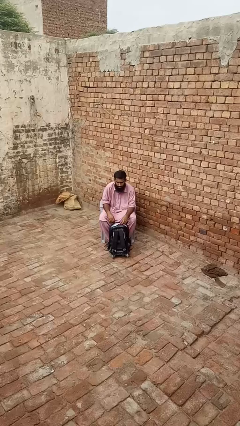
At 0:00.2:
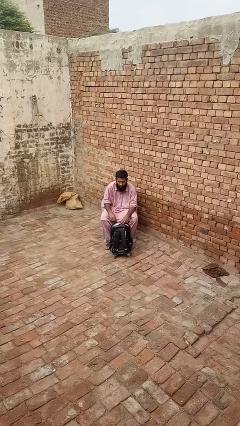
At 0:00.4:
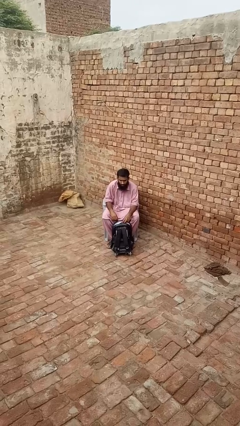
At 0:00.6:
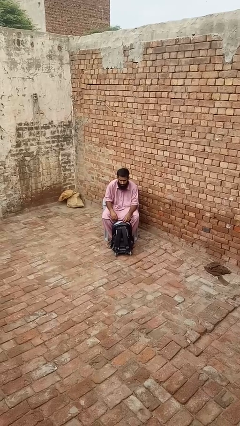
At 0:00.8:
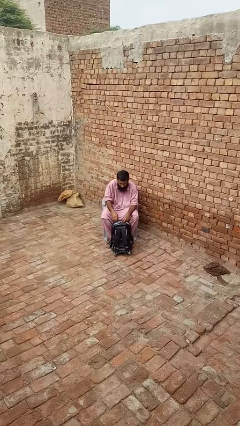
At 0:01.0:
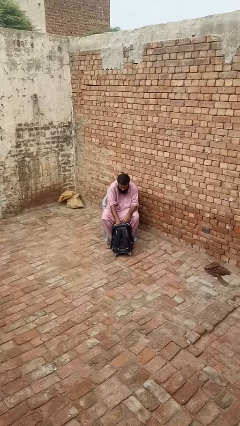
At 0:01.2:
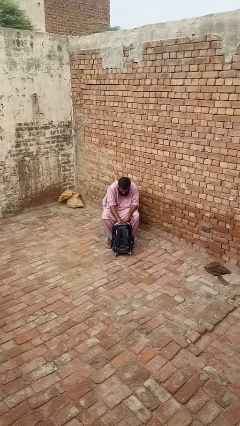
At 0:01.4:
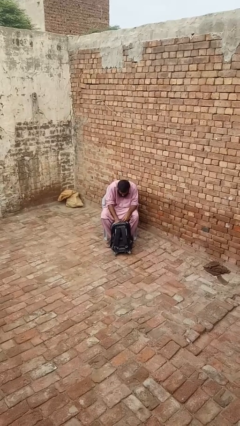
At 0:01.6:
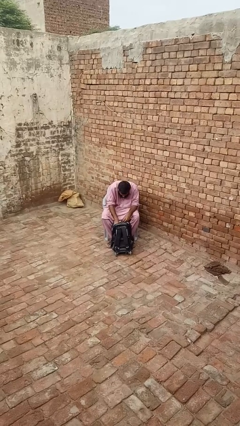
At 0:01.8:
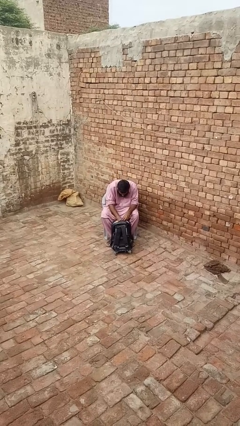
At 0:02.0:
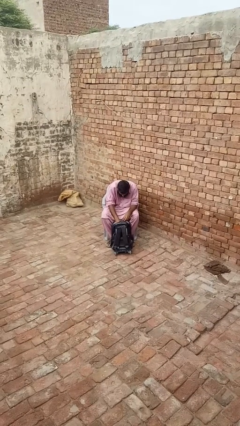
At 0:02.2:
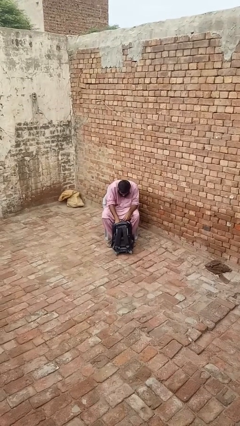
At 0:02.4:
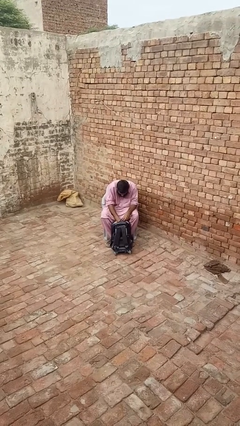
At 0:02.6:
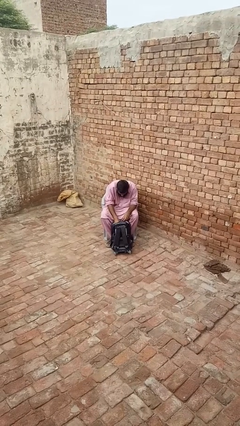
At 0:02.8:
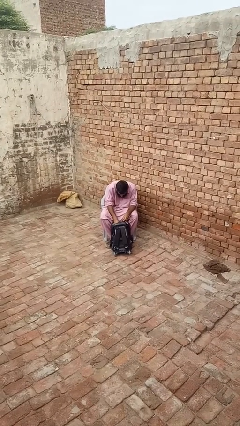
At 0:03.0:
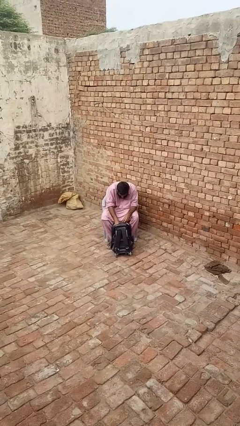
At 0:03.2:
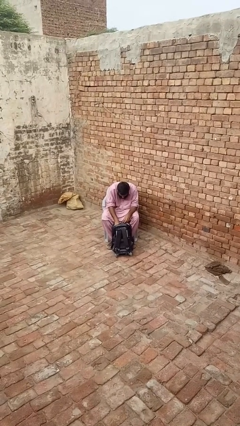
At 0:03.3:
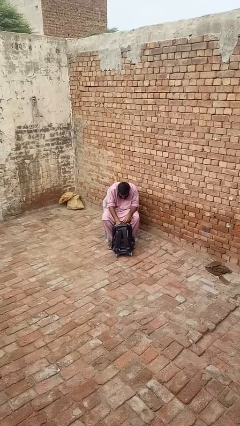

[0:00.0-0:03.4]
person searches in backpack

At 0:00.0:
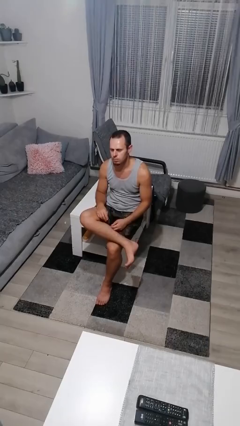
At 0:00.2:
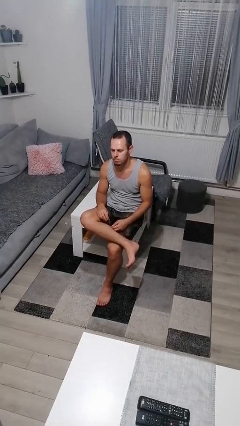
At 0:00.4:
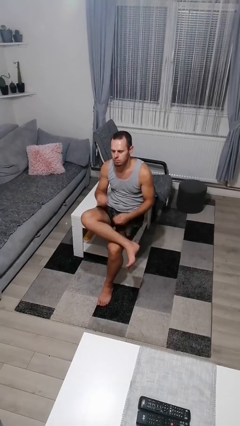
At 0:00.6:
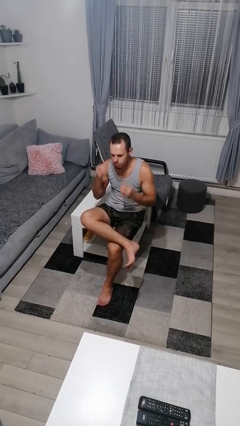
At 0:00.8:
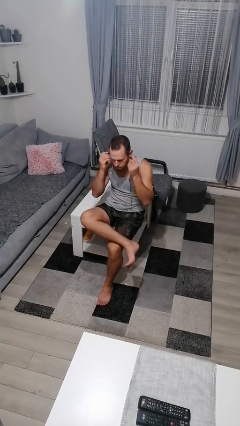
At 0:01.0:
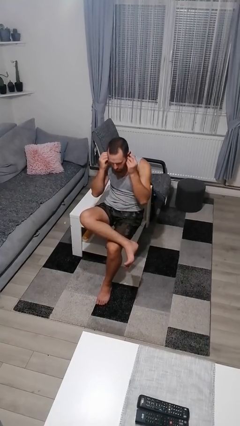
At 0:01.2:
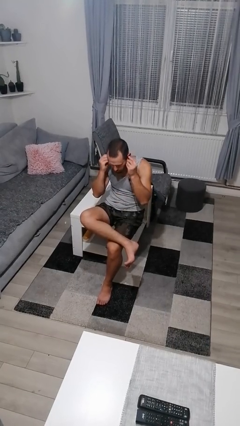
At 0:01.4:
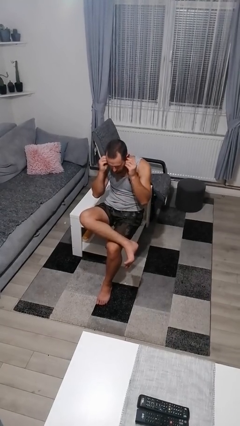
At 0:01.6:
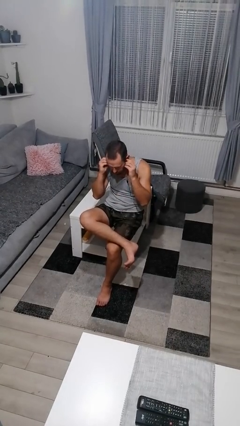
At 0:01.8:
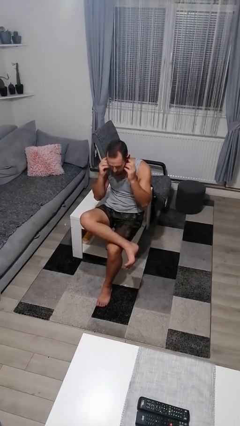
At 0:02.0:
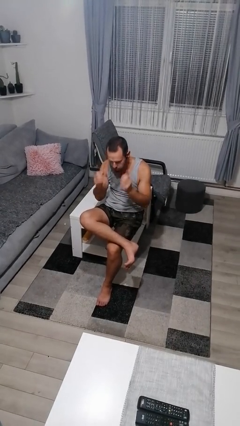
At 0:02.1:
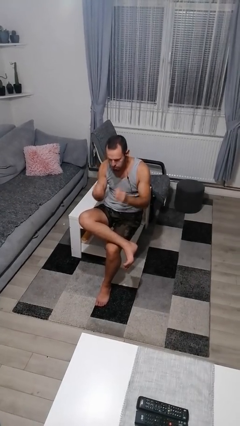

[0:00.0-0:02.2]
person puts on headphones

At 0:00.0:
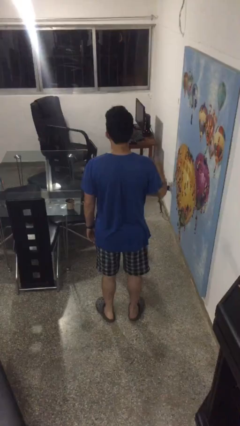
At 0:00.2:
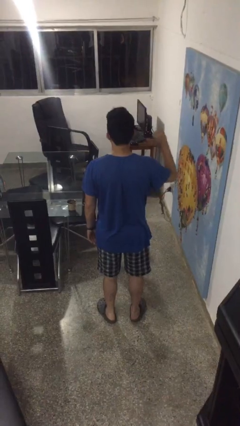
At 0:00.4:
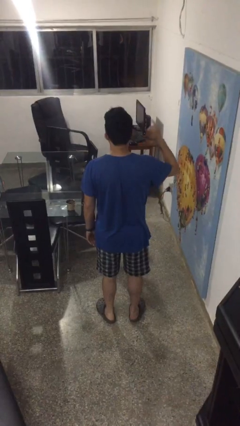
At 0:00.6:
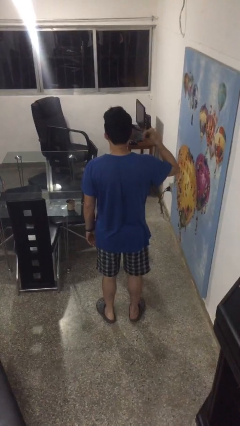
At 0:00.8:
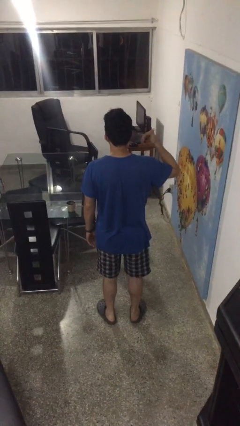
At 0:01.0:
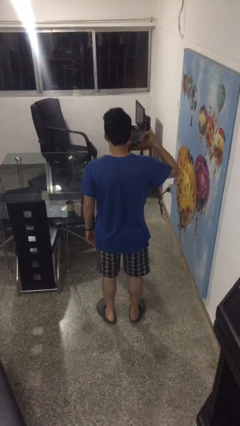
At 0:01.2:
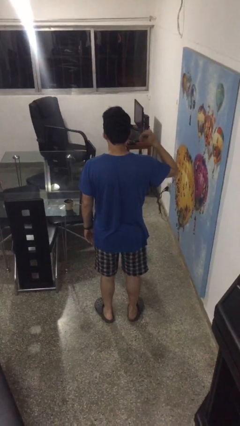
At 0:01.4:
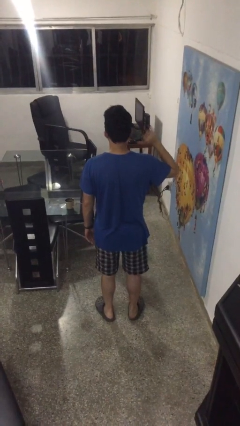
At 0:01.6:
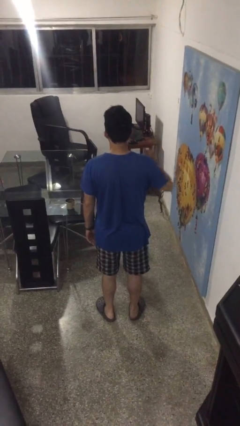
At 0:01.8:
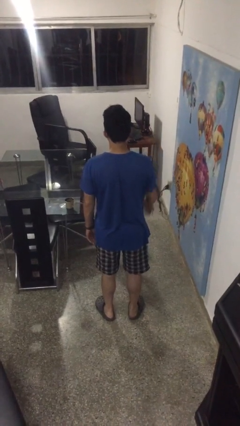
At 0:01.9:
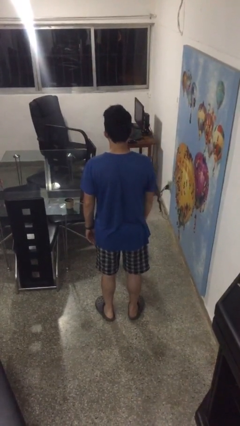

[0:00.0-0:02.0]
person gestures hang loose

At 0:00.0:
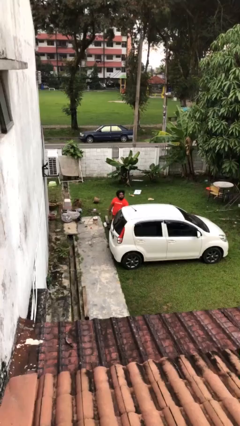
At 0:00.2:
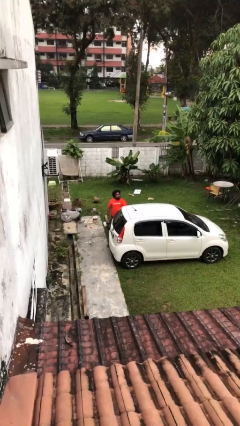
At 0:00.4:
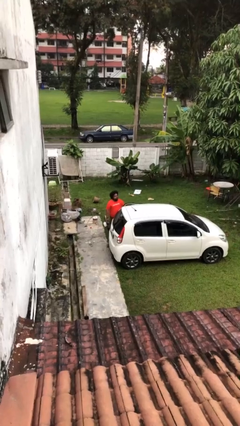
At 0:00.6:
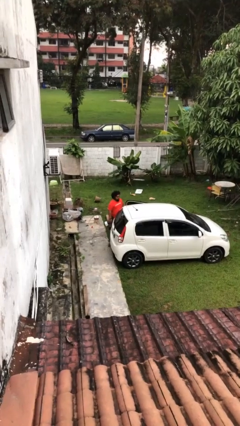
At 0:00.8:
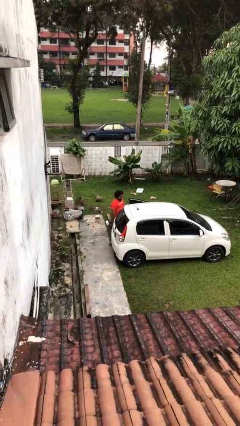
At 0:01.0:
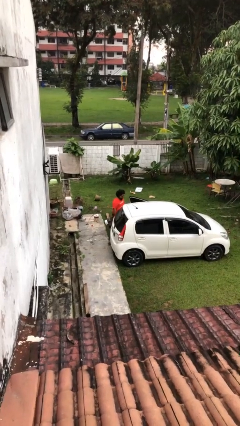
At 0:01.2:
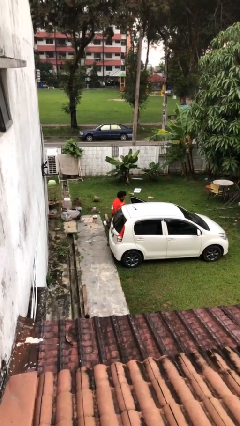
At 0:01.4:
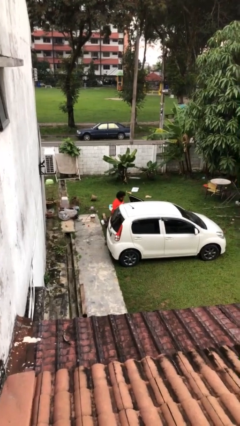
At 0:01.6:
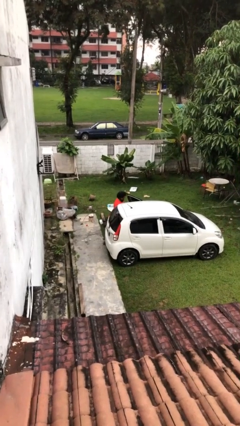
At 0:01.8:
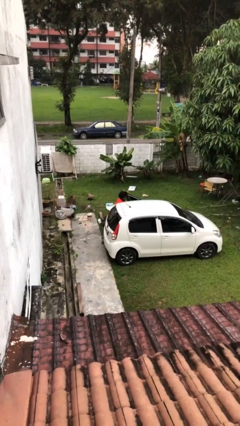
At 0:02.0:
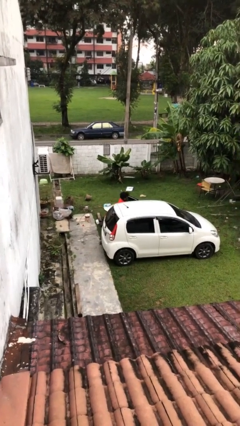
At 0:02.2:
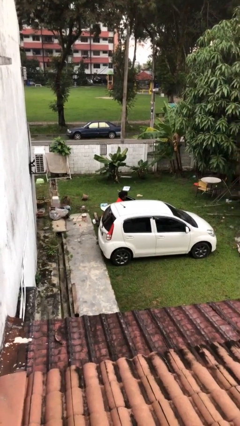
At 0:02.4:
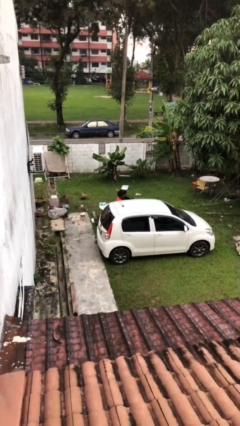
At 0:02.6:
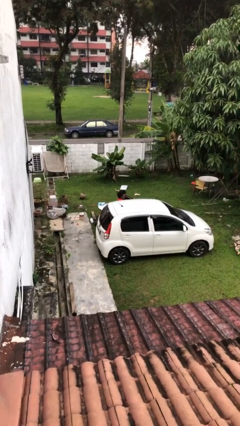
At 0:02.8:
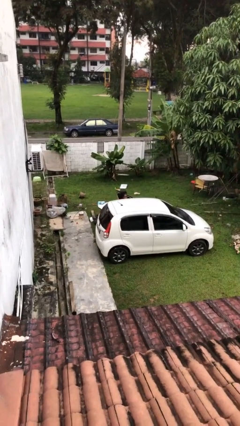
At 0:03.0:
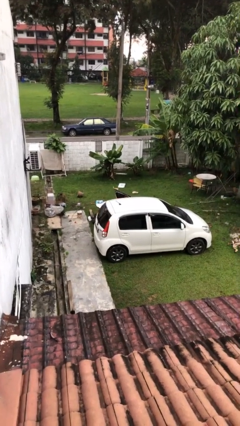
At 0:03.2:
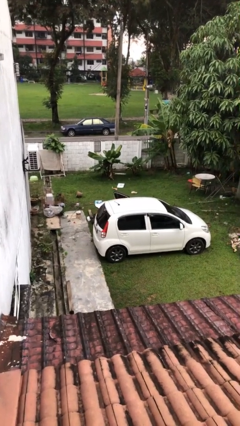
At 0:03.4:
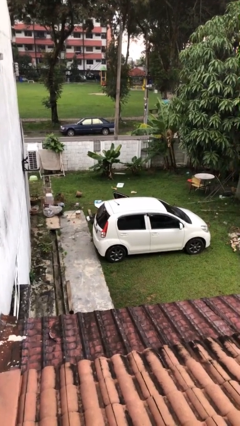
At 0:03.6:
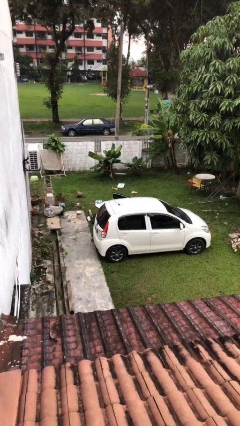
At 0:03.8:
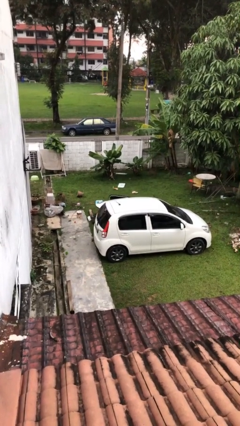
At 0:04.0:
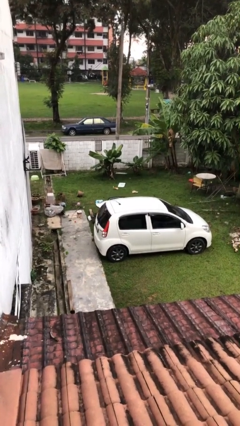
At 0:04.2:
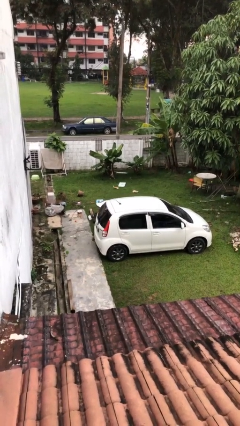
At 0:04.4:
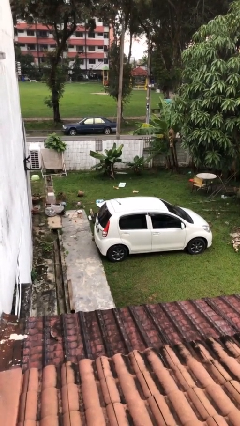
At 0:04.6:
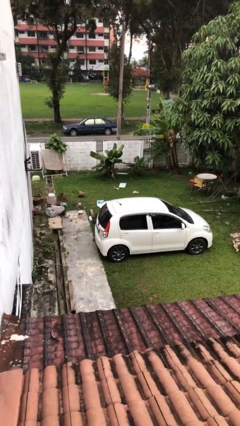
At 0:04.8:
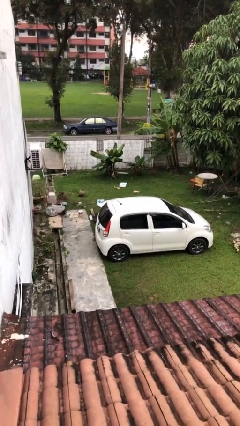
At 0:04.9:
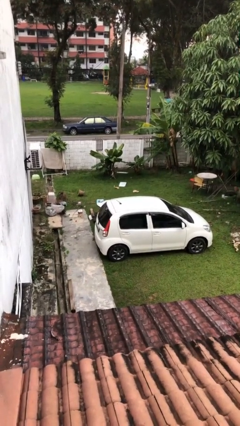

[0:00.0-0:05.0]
car picks up person

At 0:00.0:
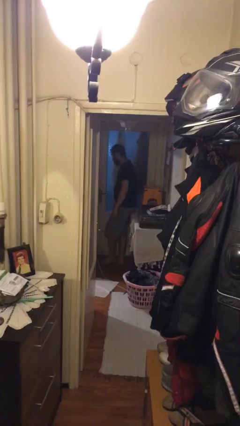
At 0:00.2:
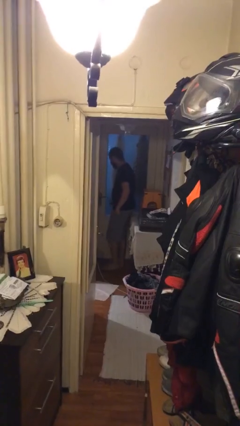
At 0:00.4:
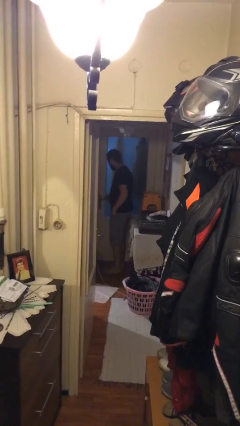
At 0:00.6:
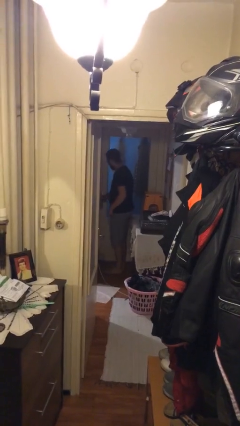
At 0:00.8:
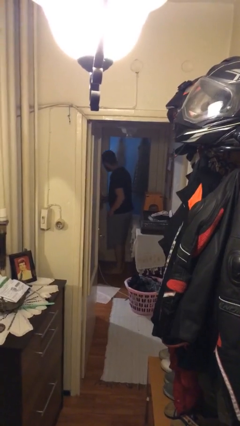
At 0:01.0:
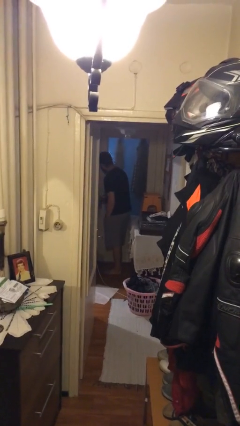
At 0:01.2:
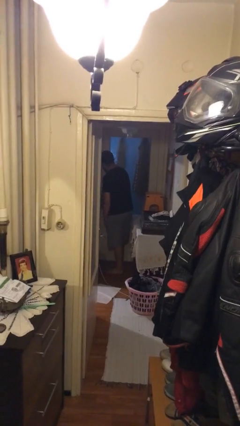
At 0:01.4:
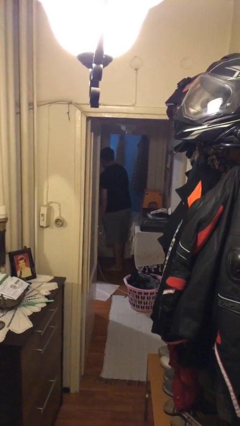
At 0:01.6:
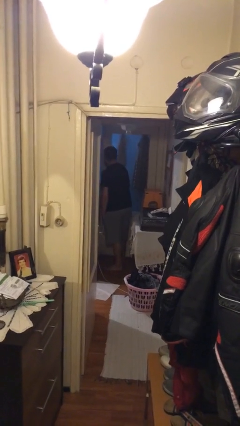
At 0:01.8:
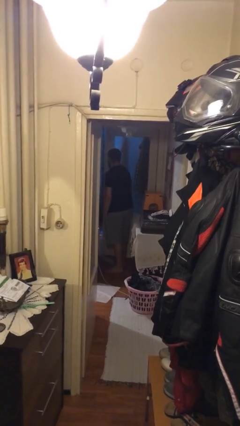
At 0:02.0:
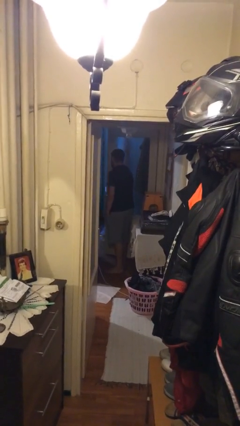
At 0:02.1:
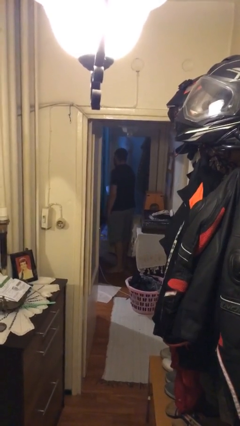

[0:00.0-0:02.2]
person opens facility door

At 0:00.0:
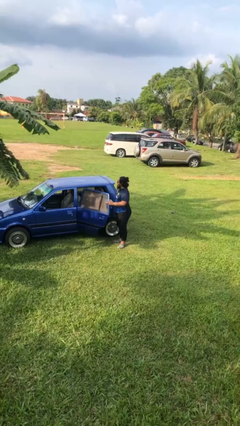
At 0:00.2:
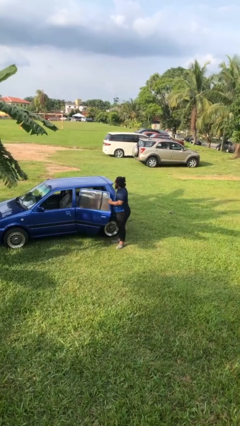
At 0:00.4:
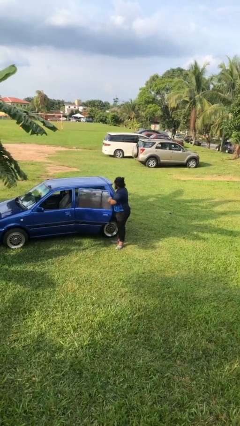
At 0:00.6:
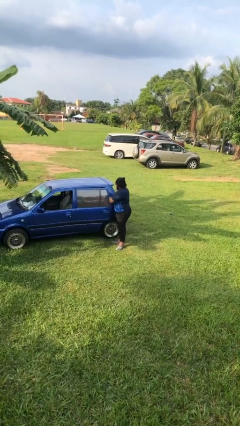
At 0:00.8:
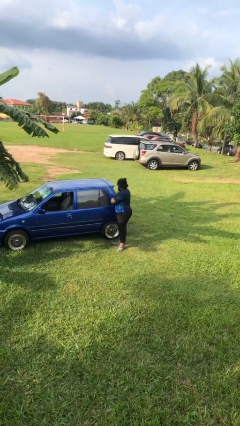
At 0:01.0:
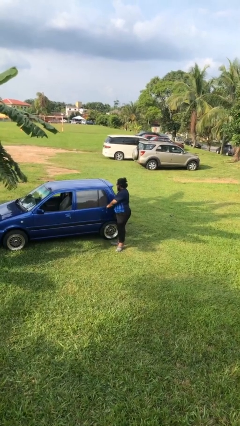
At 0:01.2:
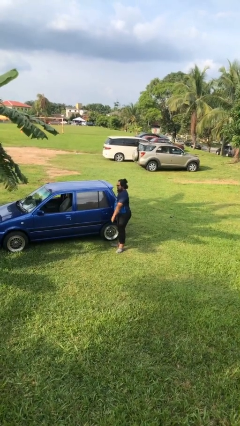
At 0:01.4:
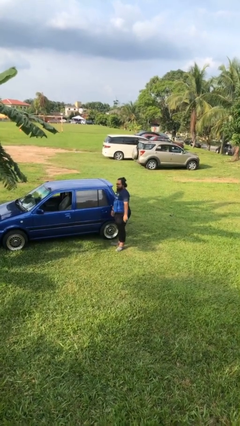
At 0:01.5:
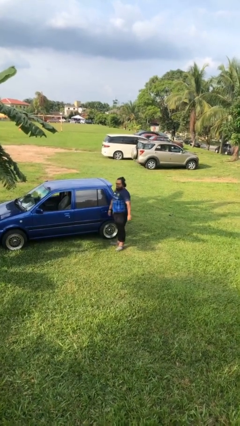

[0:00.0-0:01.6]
person closes car door

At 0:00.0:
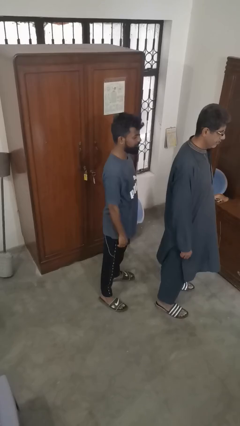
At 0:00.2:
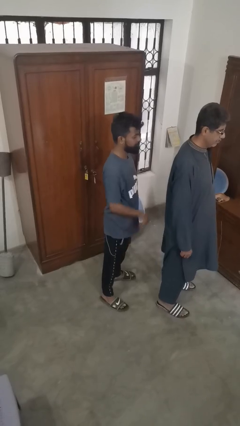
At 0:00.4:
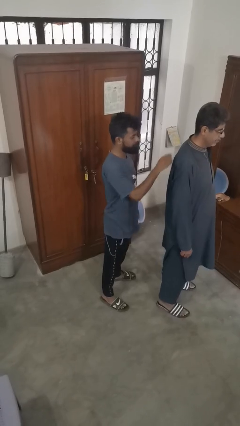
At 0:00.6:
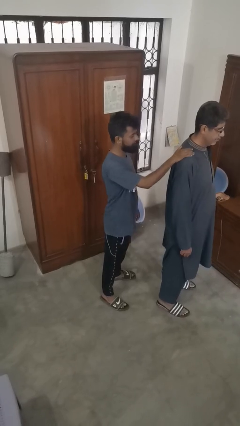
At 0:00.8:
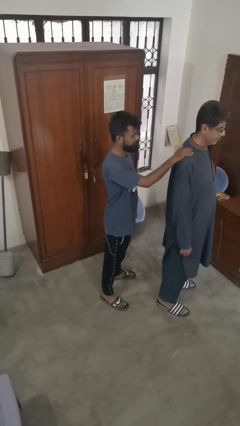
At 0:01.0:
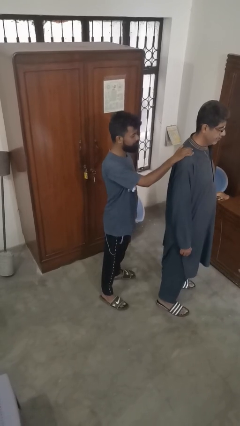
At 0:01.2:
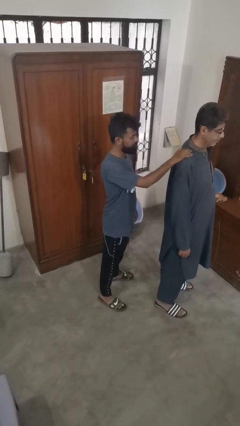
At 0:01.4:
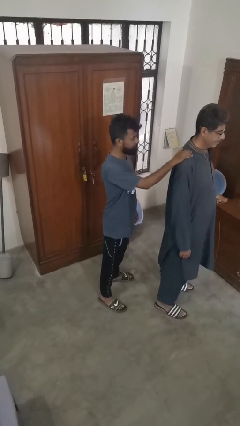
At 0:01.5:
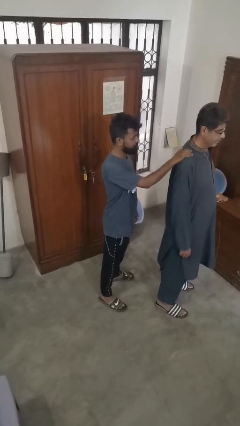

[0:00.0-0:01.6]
person grabs person by shoulder
